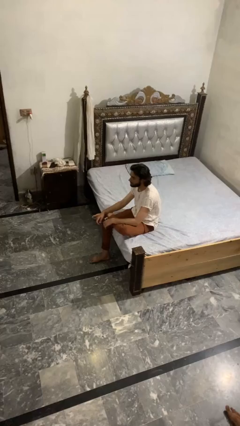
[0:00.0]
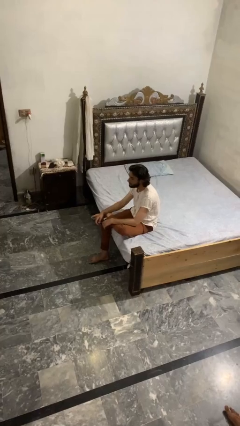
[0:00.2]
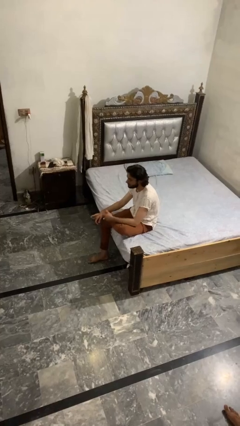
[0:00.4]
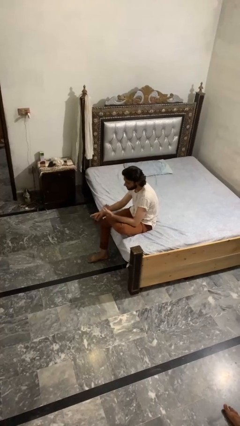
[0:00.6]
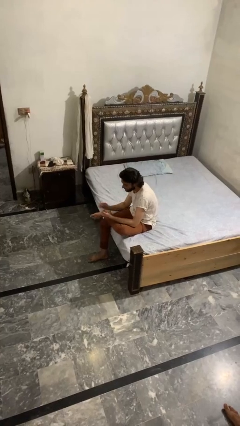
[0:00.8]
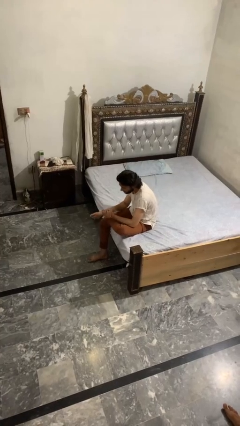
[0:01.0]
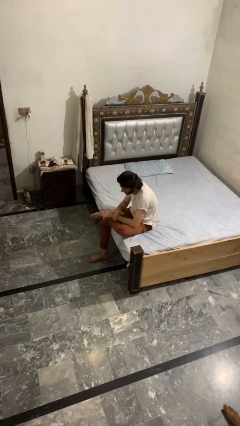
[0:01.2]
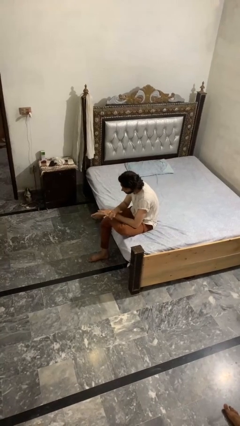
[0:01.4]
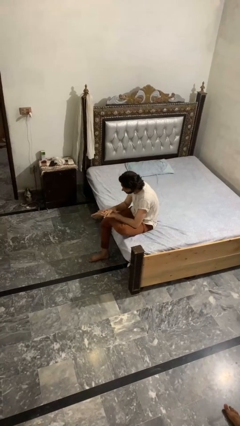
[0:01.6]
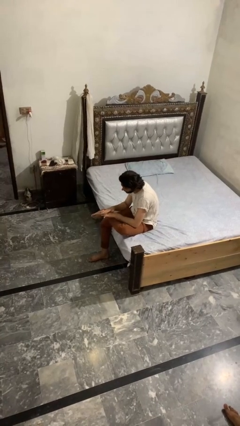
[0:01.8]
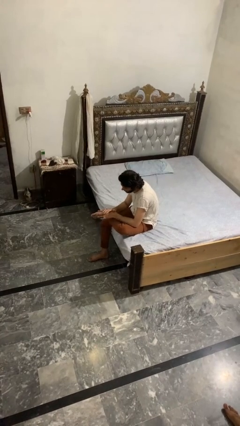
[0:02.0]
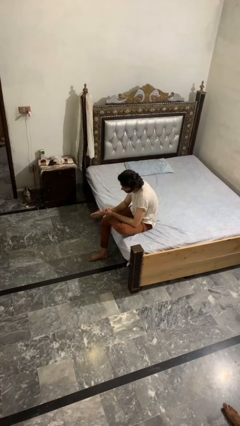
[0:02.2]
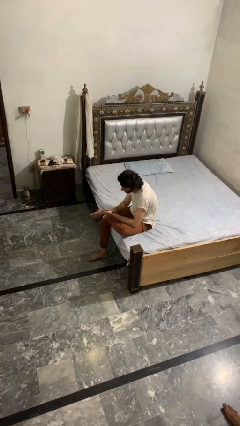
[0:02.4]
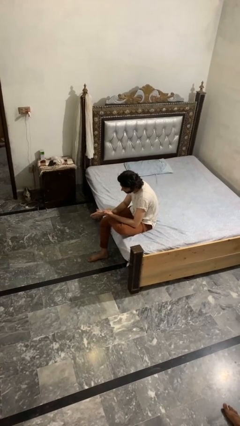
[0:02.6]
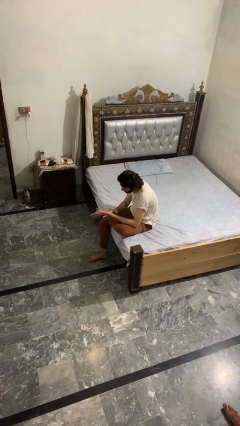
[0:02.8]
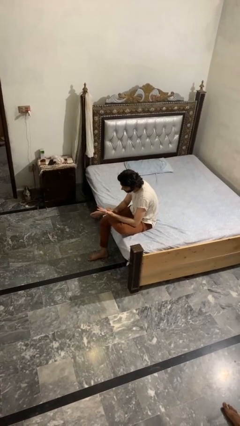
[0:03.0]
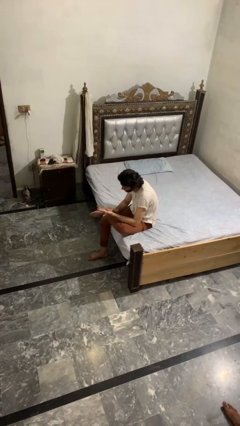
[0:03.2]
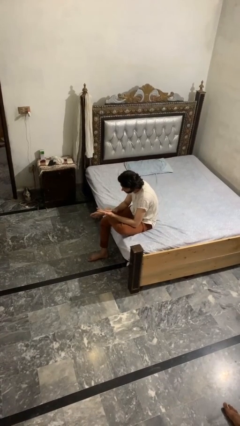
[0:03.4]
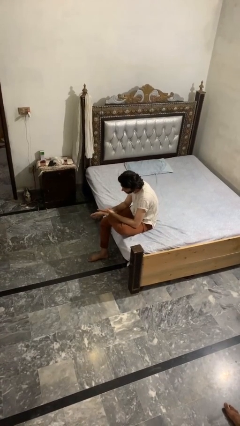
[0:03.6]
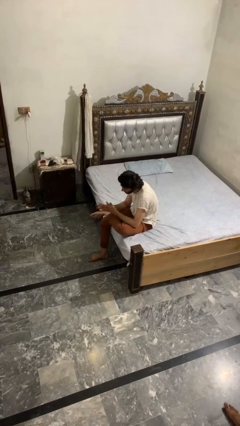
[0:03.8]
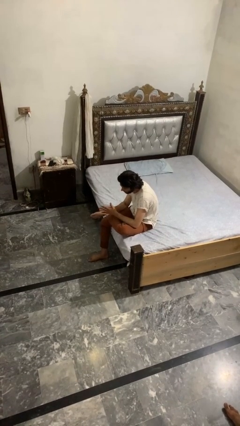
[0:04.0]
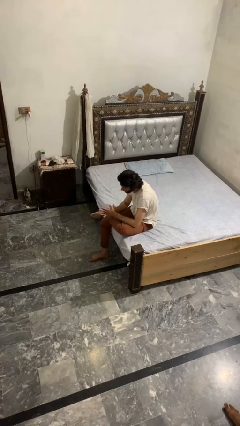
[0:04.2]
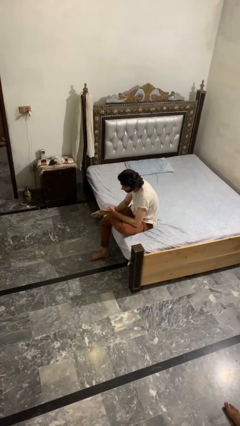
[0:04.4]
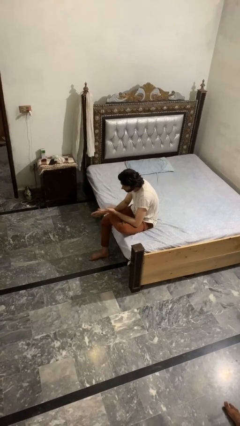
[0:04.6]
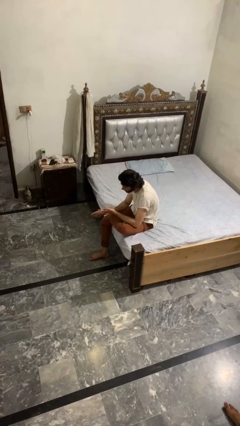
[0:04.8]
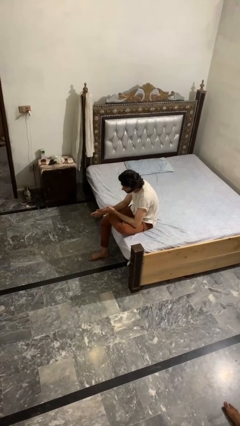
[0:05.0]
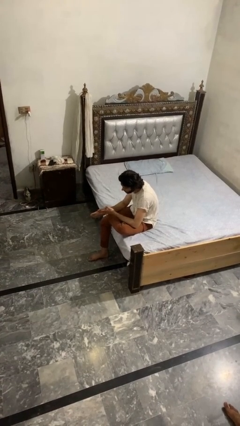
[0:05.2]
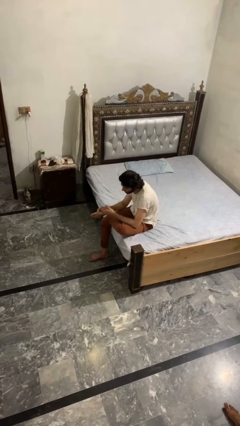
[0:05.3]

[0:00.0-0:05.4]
person looks at hands in lap

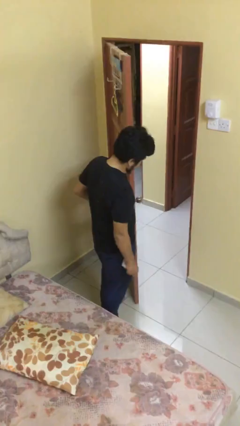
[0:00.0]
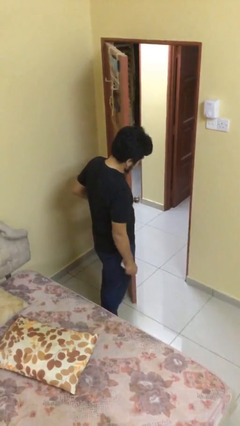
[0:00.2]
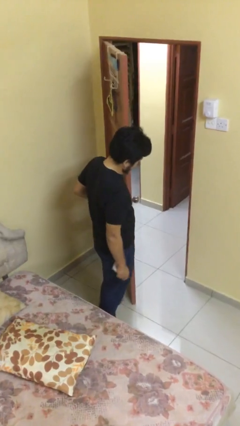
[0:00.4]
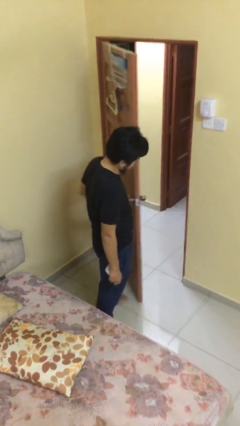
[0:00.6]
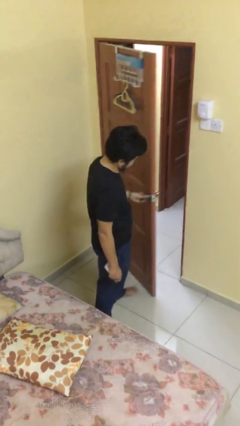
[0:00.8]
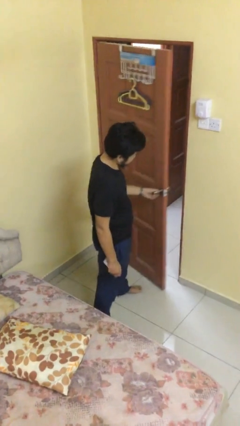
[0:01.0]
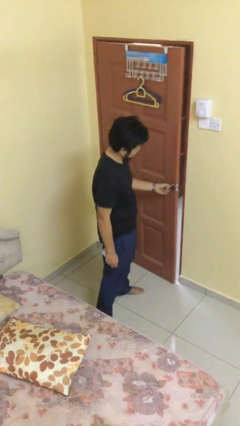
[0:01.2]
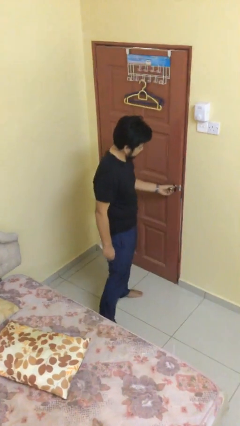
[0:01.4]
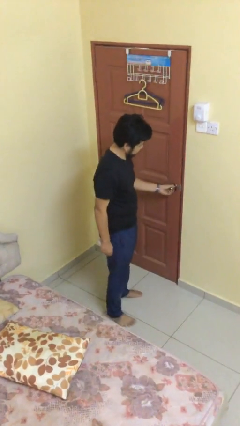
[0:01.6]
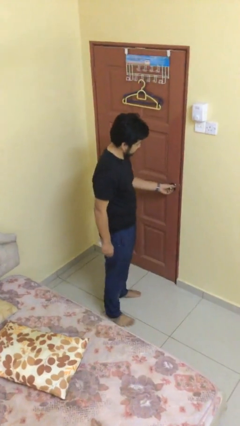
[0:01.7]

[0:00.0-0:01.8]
person closes facility door

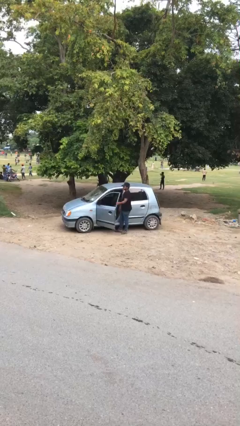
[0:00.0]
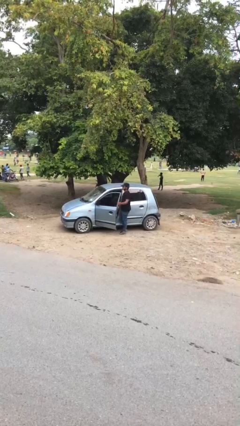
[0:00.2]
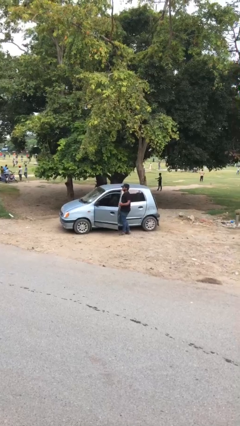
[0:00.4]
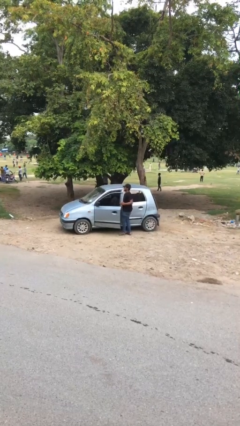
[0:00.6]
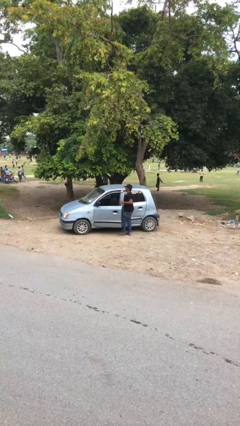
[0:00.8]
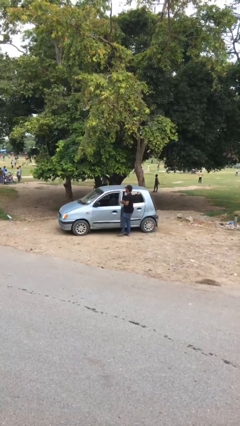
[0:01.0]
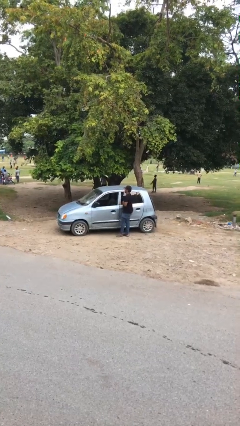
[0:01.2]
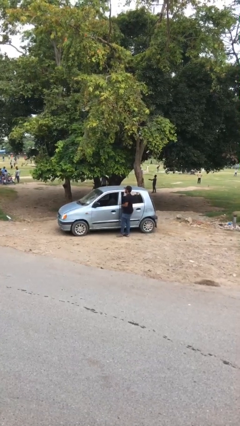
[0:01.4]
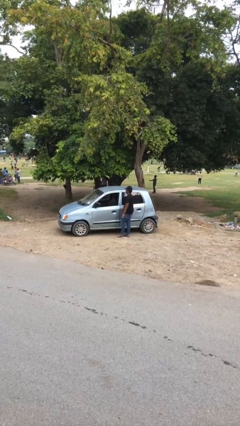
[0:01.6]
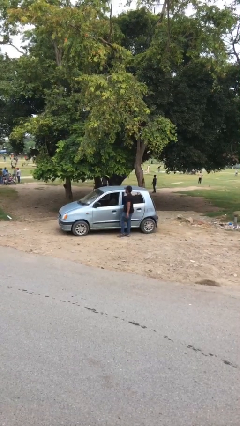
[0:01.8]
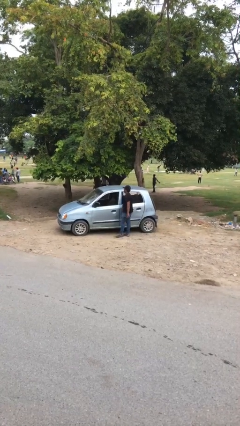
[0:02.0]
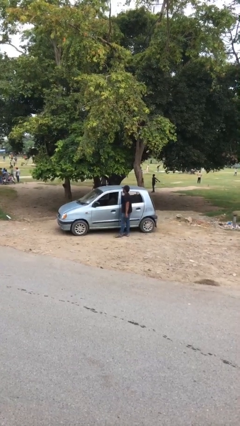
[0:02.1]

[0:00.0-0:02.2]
person closes car door

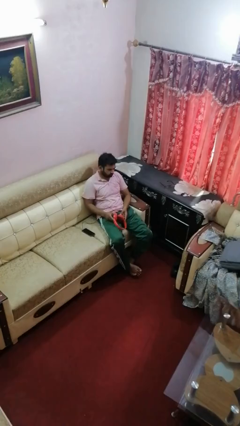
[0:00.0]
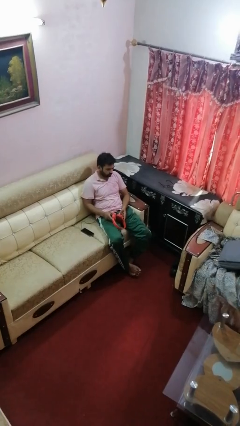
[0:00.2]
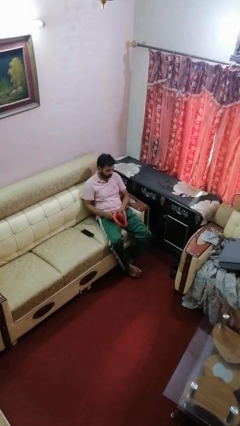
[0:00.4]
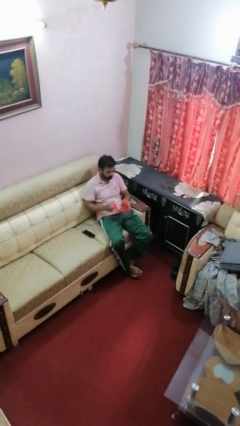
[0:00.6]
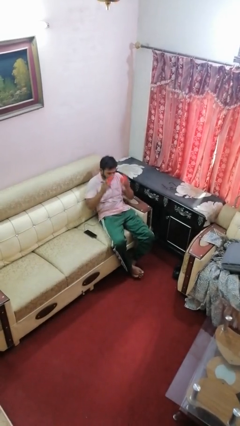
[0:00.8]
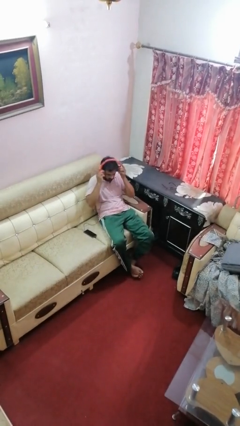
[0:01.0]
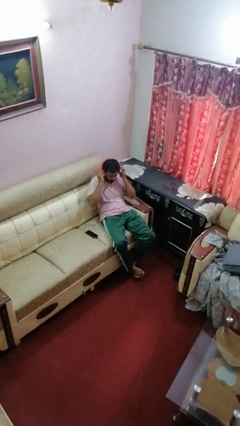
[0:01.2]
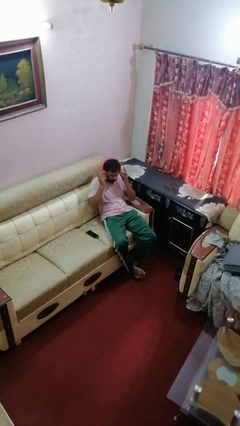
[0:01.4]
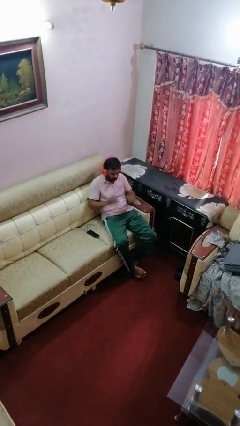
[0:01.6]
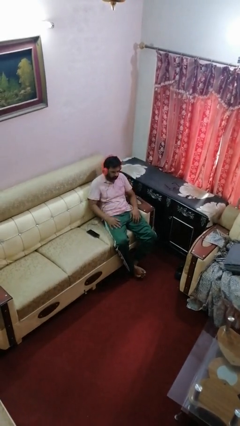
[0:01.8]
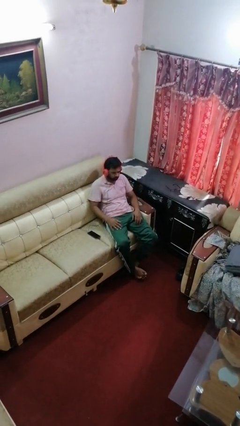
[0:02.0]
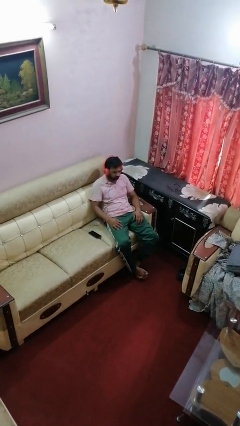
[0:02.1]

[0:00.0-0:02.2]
person puts on headphones

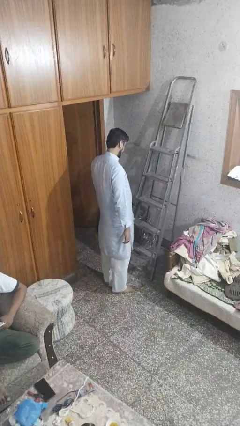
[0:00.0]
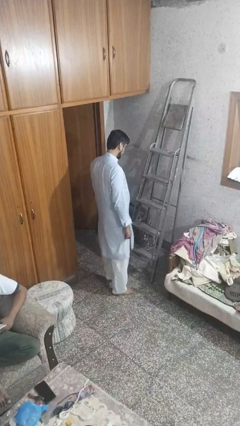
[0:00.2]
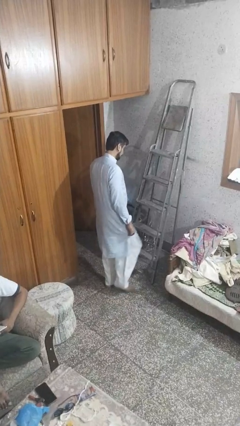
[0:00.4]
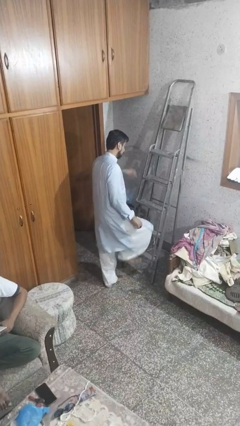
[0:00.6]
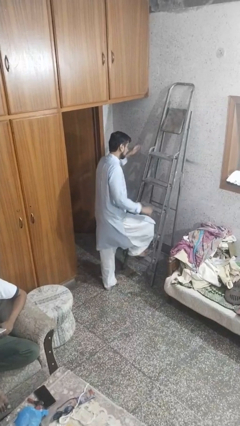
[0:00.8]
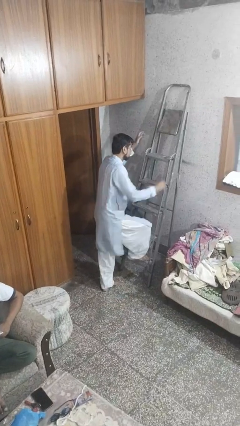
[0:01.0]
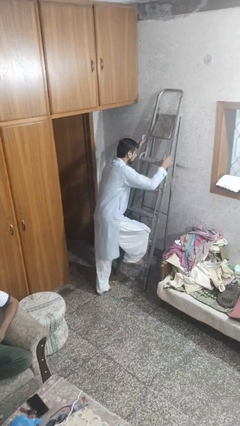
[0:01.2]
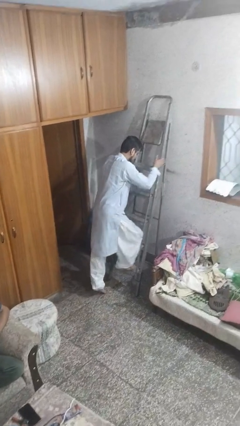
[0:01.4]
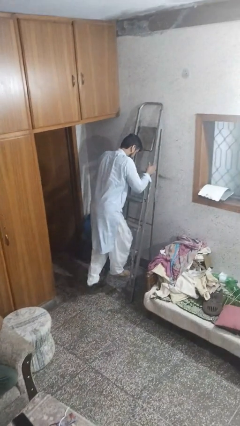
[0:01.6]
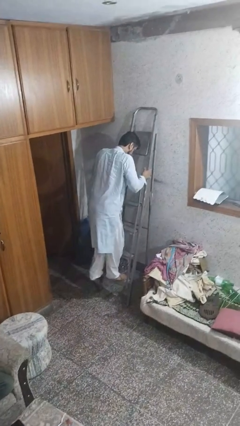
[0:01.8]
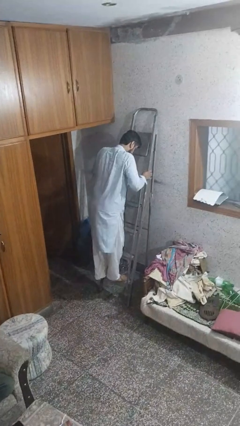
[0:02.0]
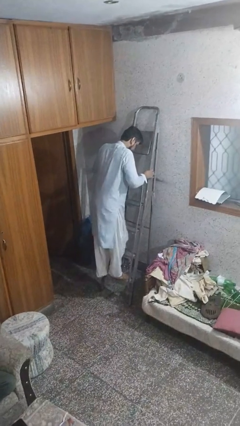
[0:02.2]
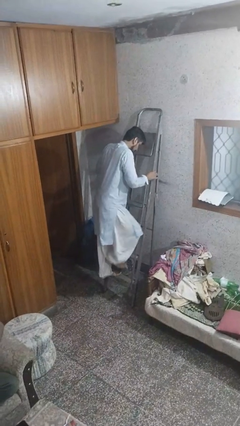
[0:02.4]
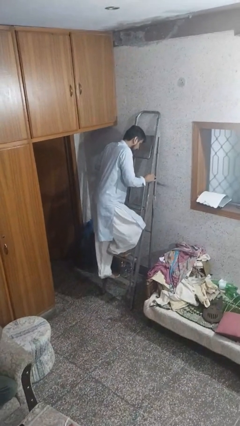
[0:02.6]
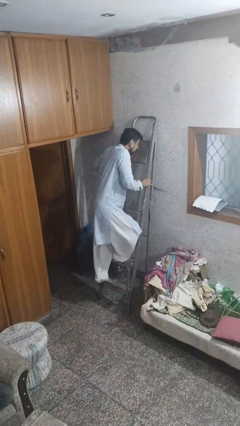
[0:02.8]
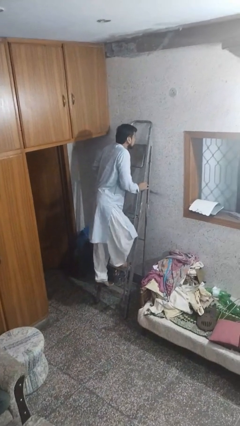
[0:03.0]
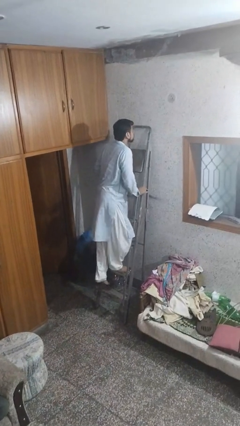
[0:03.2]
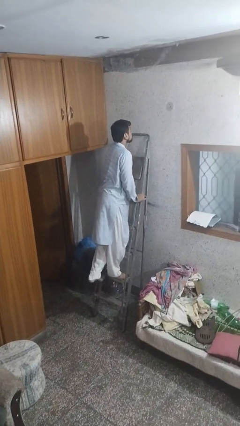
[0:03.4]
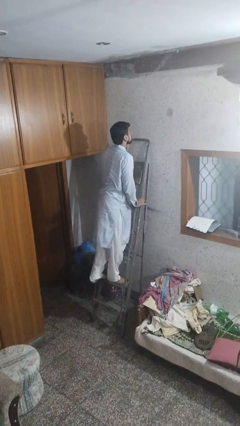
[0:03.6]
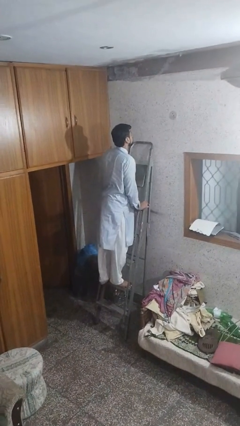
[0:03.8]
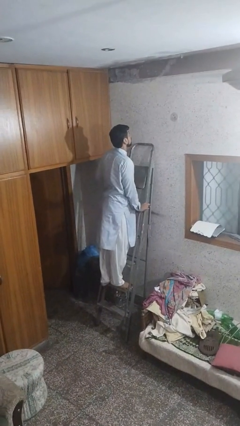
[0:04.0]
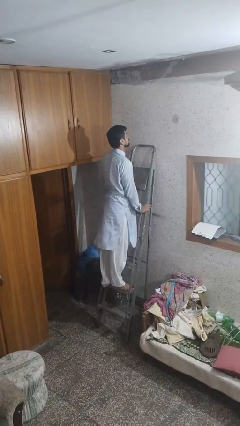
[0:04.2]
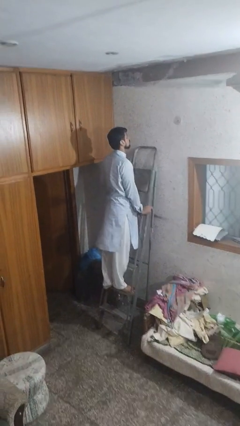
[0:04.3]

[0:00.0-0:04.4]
person climbs up ladder

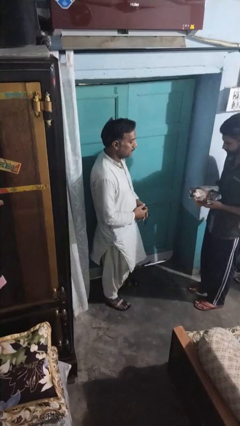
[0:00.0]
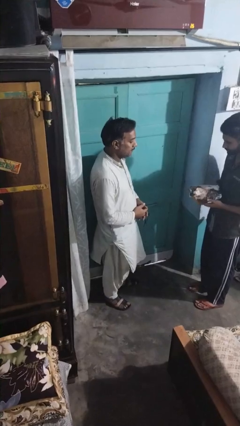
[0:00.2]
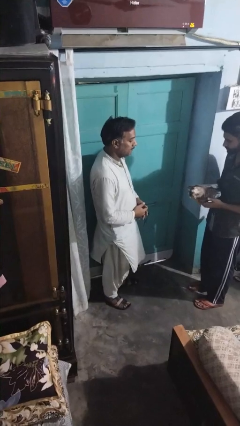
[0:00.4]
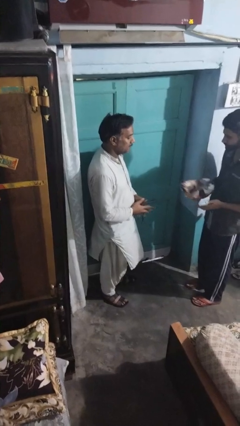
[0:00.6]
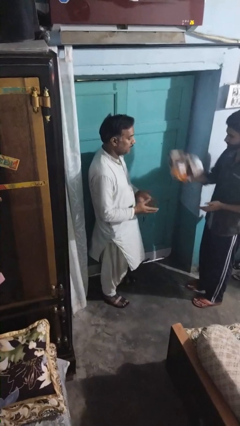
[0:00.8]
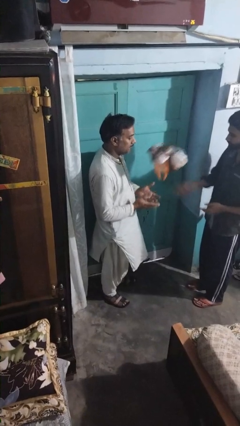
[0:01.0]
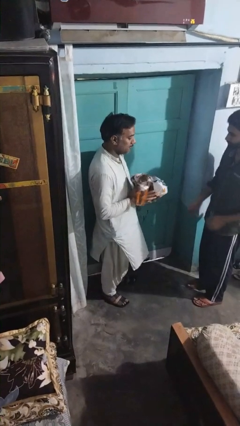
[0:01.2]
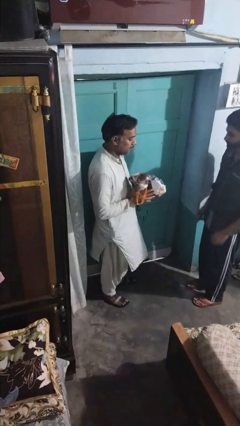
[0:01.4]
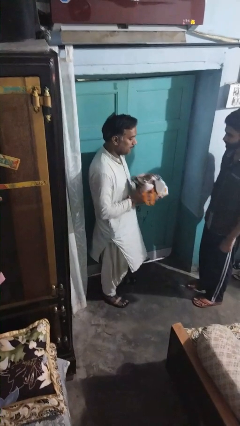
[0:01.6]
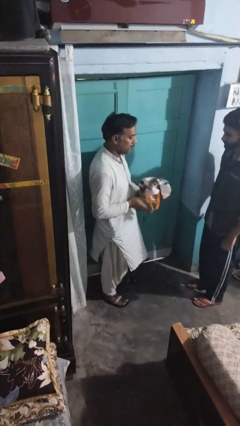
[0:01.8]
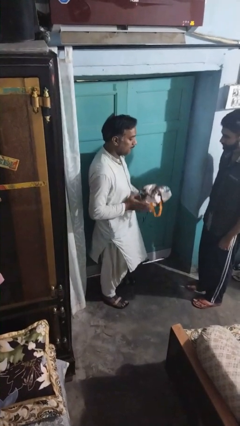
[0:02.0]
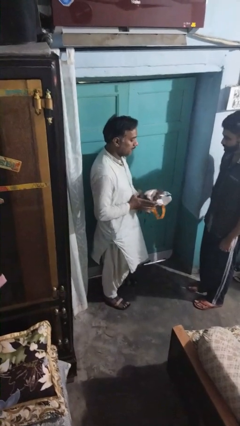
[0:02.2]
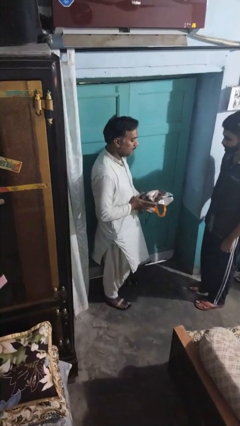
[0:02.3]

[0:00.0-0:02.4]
person catches object from person
